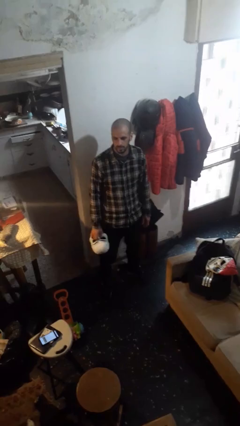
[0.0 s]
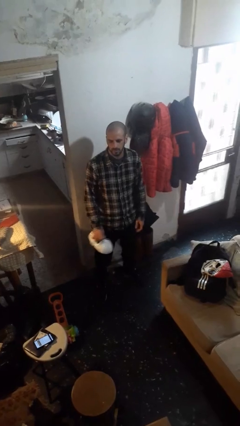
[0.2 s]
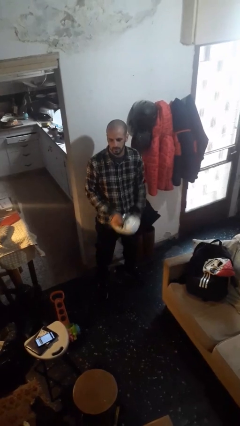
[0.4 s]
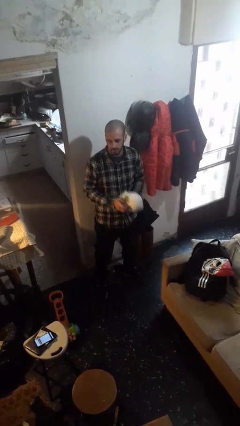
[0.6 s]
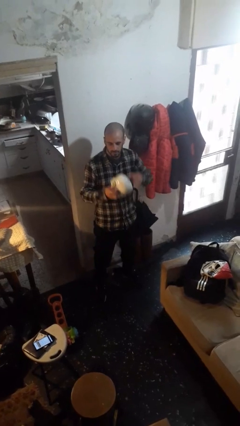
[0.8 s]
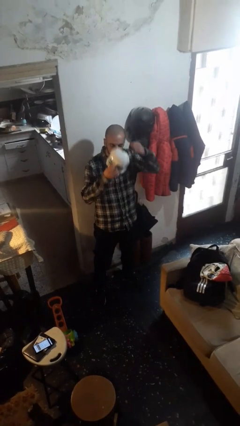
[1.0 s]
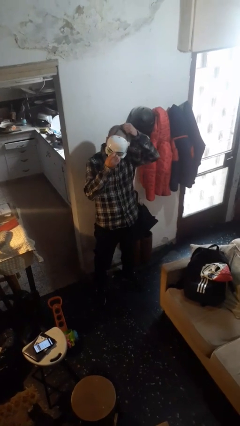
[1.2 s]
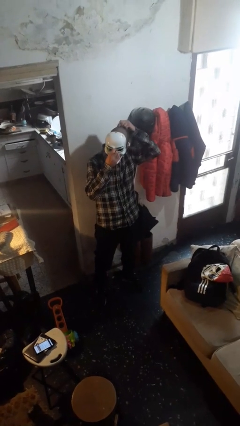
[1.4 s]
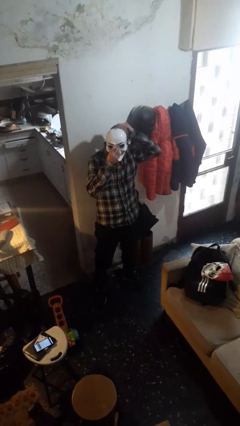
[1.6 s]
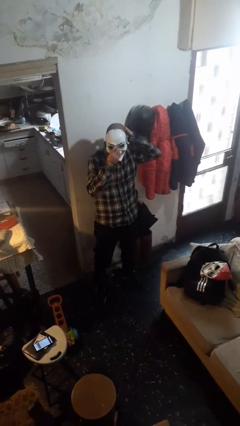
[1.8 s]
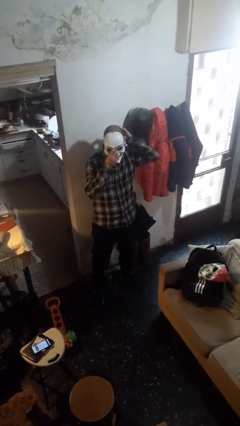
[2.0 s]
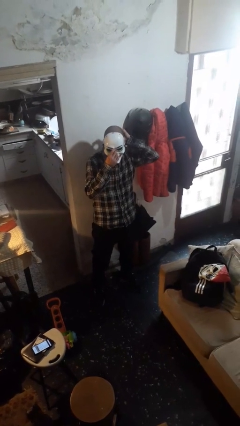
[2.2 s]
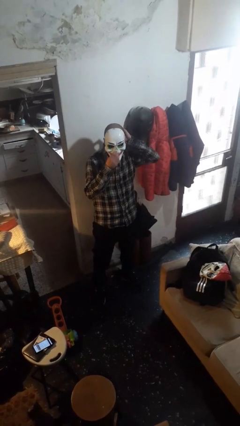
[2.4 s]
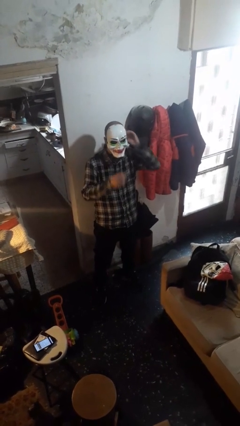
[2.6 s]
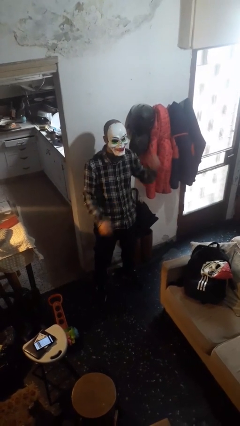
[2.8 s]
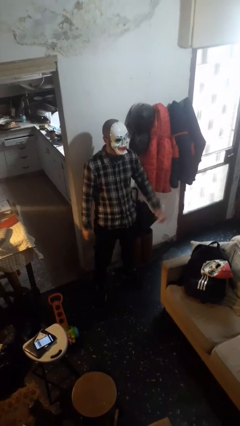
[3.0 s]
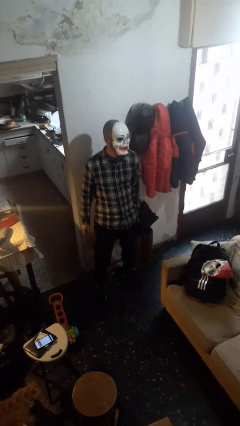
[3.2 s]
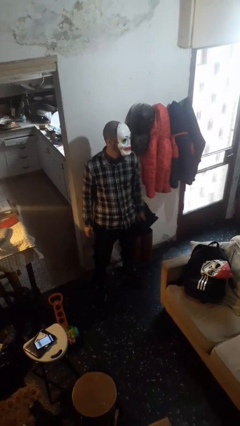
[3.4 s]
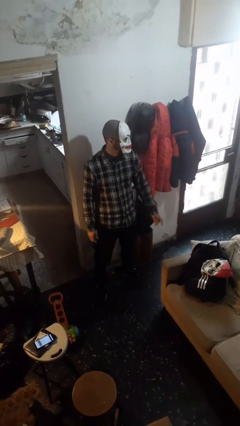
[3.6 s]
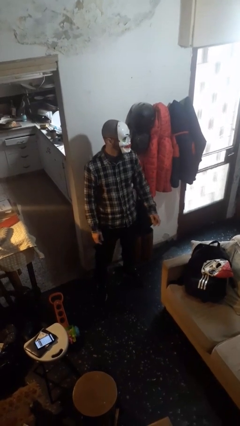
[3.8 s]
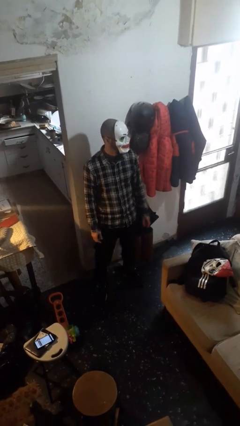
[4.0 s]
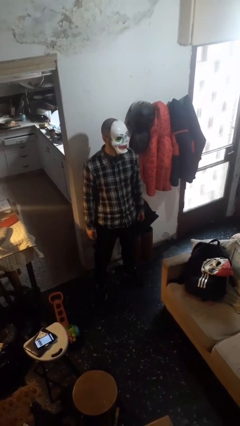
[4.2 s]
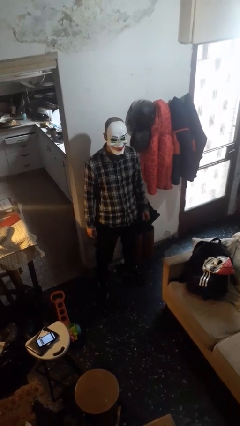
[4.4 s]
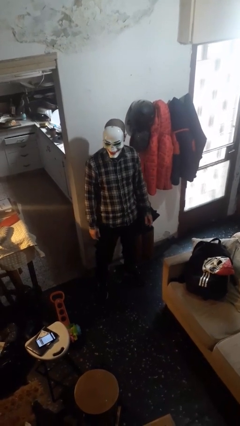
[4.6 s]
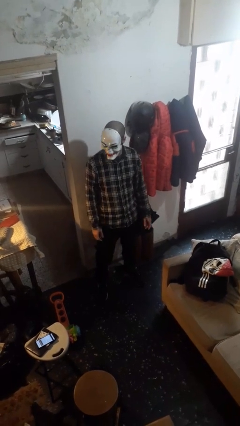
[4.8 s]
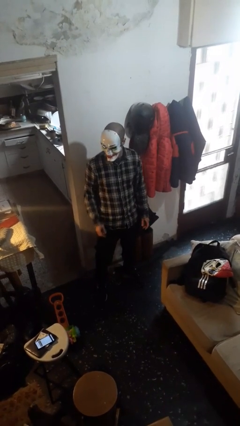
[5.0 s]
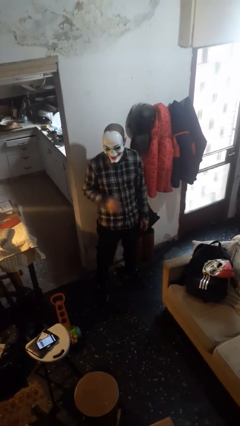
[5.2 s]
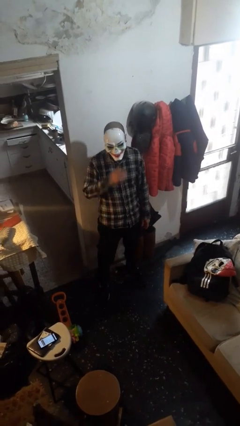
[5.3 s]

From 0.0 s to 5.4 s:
person puts on facemask

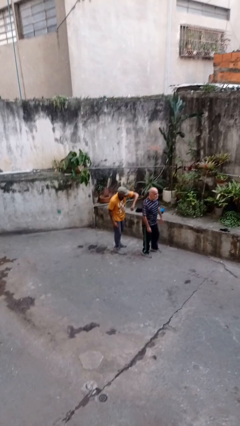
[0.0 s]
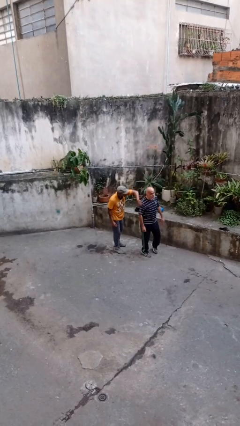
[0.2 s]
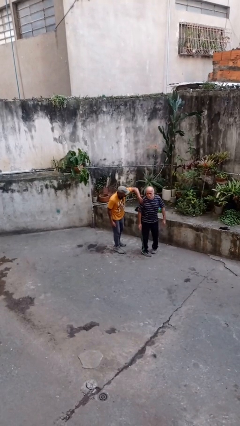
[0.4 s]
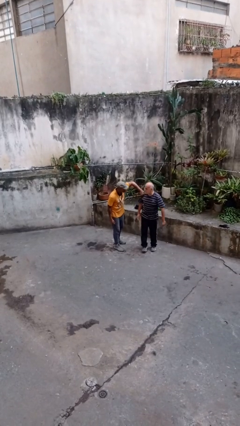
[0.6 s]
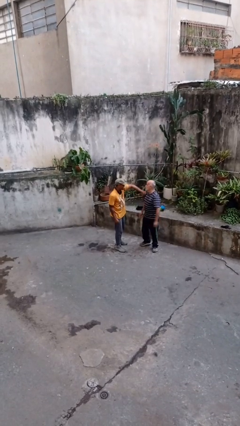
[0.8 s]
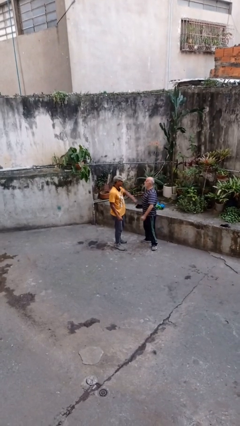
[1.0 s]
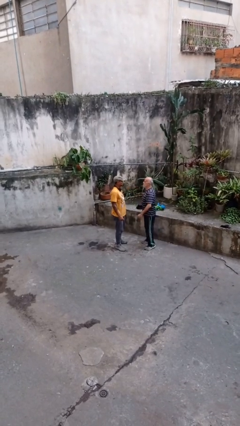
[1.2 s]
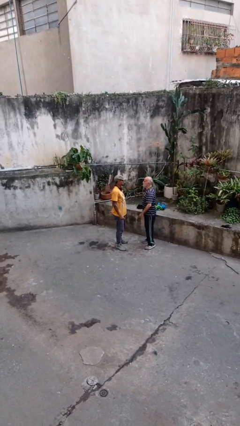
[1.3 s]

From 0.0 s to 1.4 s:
person spins person around

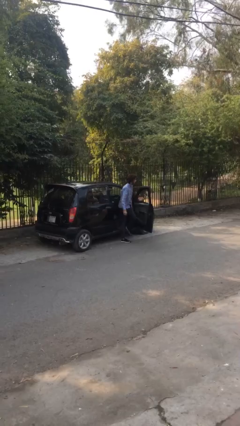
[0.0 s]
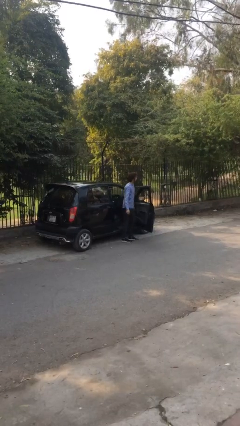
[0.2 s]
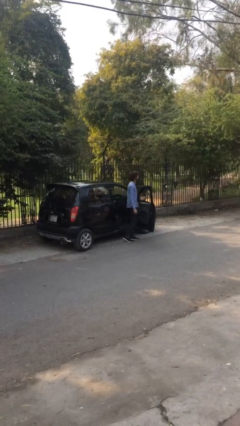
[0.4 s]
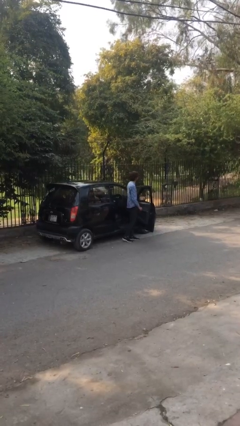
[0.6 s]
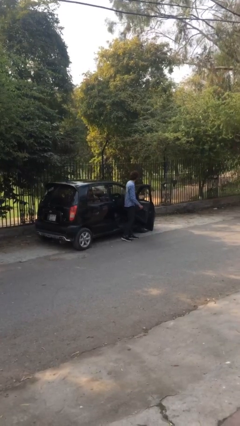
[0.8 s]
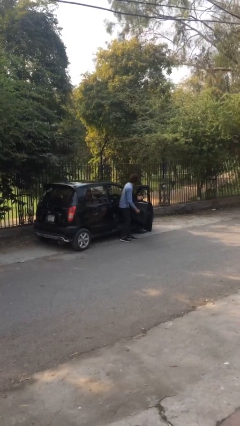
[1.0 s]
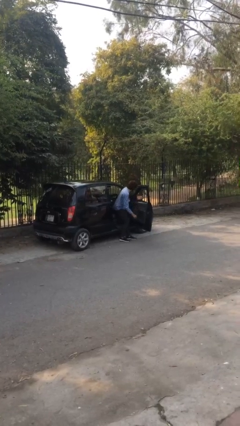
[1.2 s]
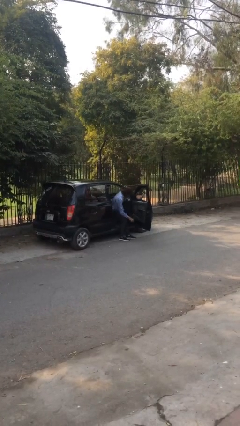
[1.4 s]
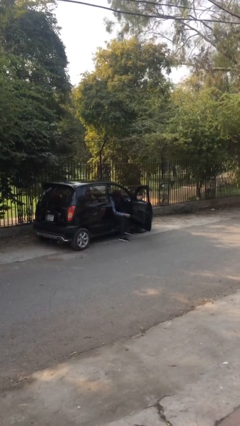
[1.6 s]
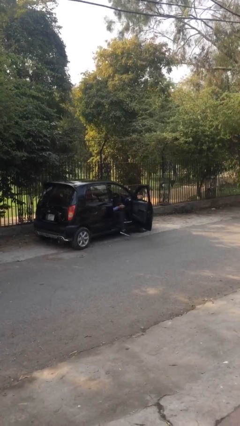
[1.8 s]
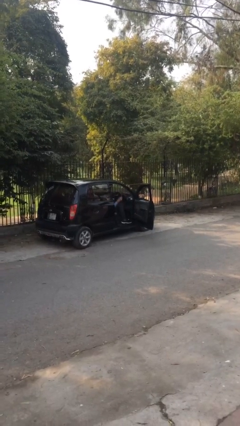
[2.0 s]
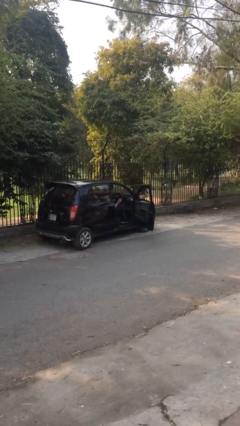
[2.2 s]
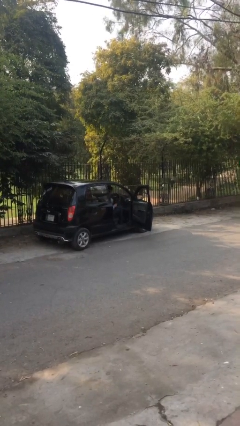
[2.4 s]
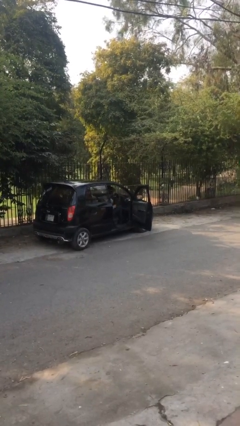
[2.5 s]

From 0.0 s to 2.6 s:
person enters car

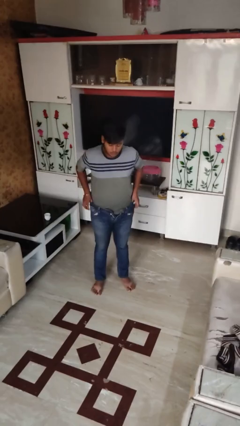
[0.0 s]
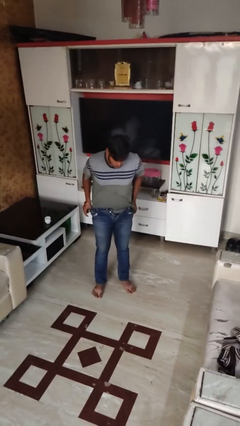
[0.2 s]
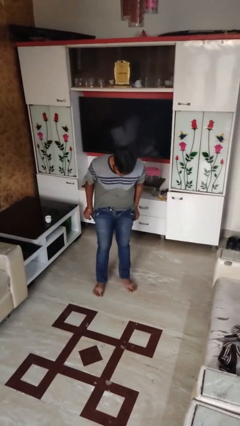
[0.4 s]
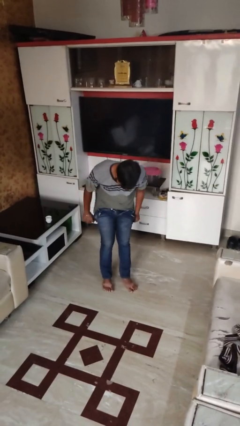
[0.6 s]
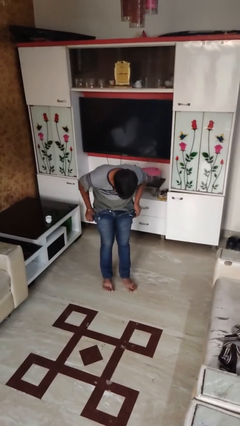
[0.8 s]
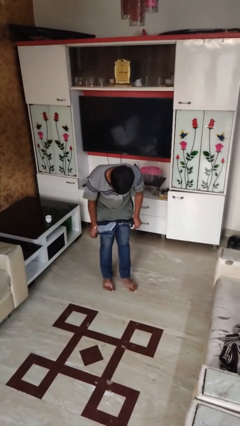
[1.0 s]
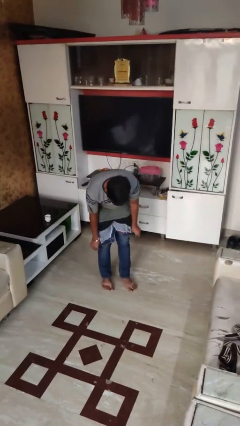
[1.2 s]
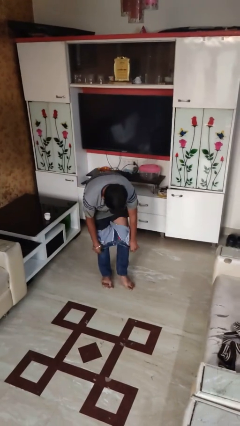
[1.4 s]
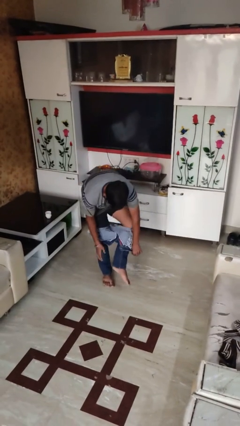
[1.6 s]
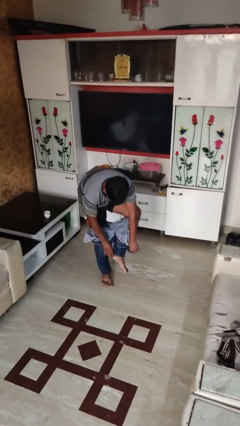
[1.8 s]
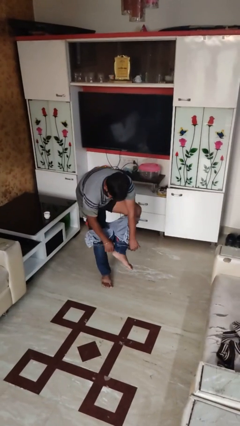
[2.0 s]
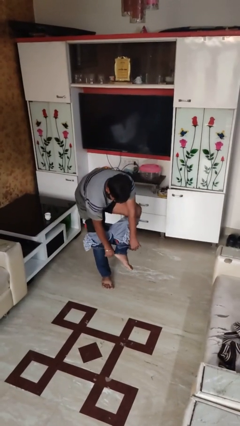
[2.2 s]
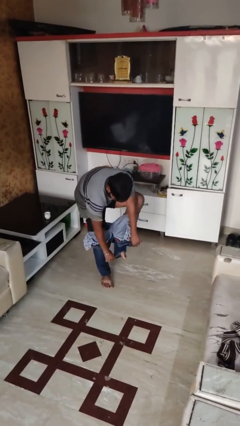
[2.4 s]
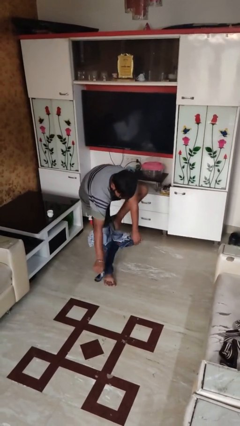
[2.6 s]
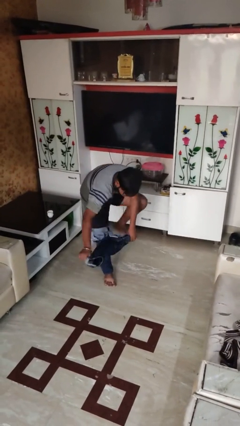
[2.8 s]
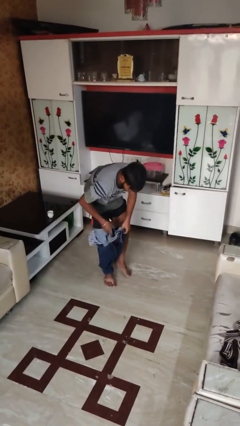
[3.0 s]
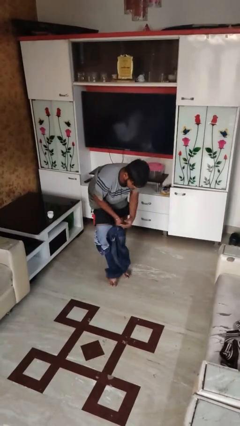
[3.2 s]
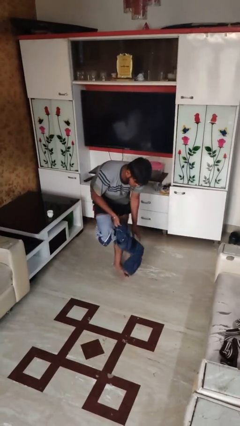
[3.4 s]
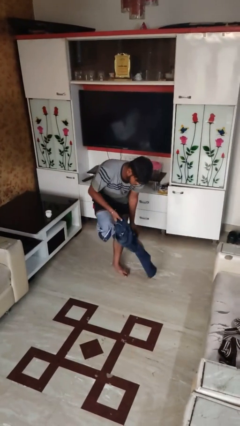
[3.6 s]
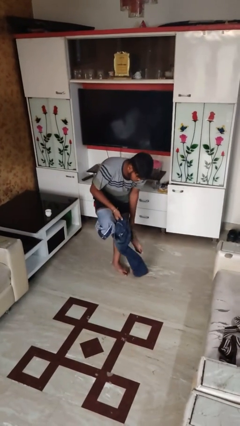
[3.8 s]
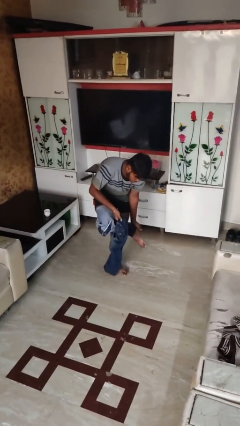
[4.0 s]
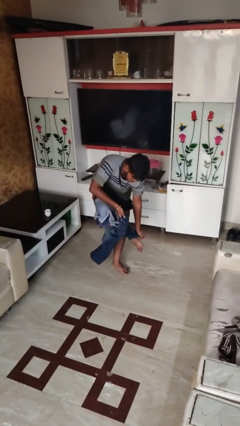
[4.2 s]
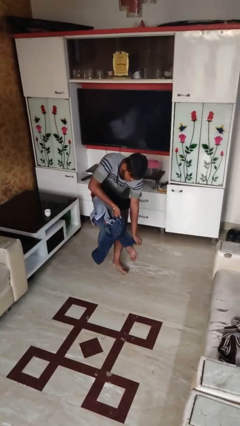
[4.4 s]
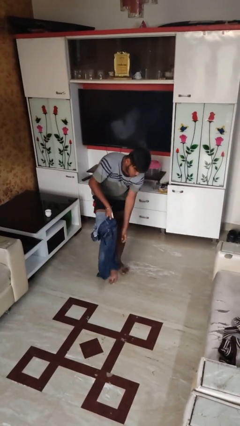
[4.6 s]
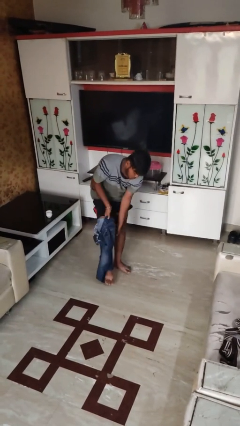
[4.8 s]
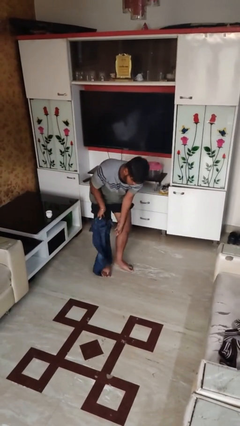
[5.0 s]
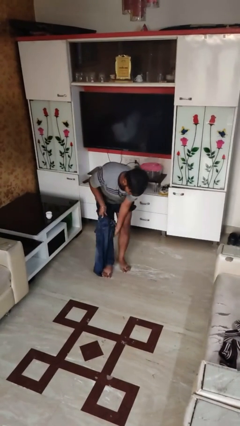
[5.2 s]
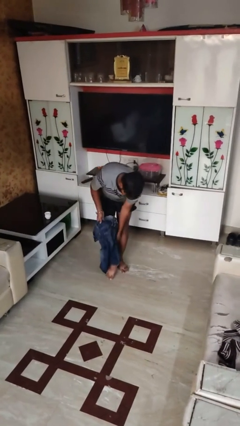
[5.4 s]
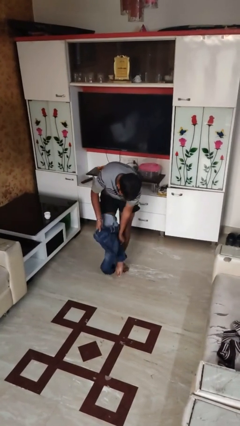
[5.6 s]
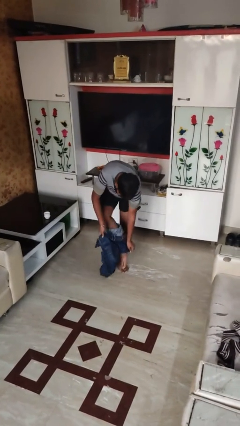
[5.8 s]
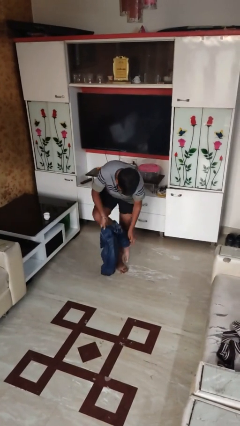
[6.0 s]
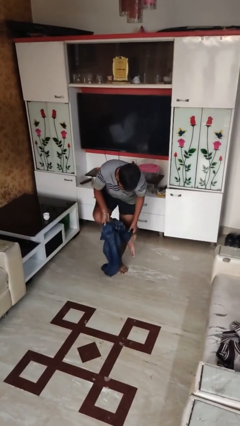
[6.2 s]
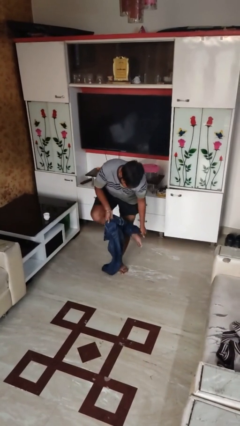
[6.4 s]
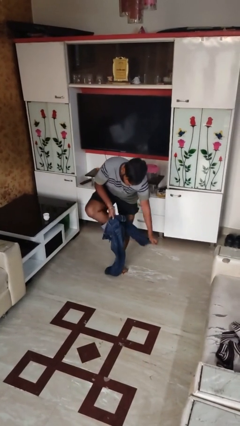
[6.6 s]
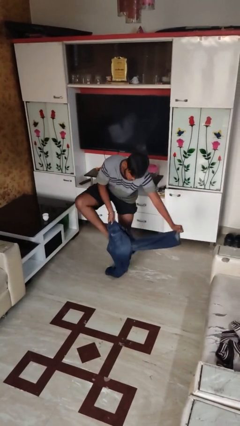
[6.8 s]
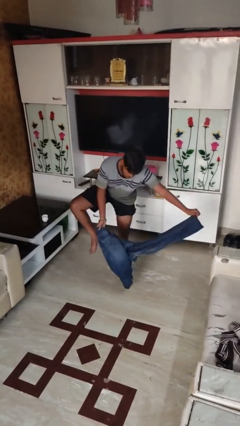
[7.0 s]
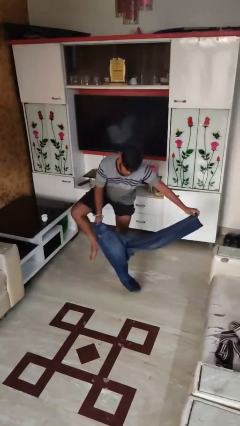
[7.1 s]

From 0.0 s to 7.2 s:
person takes off pants

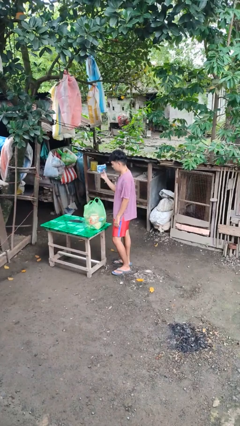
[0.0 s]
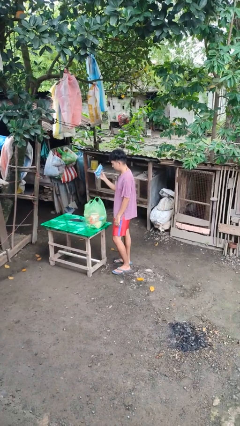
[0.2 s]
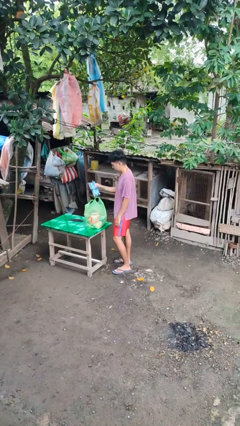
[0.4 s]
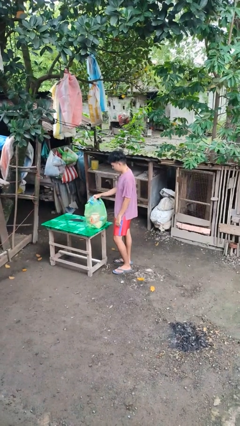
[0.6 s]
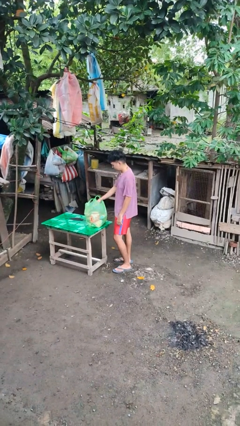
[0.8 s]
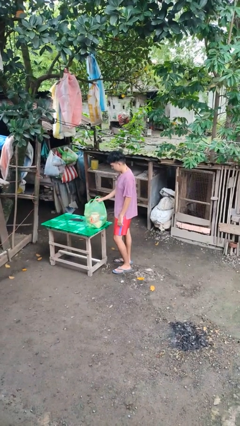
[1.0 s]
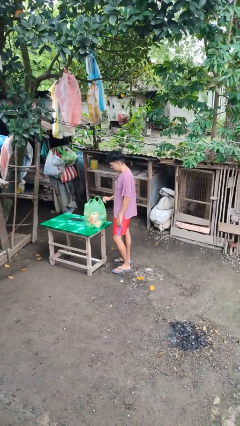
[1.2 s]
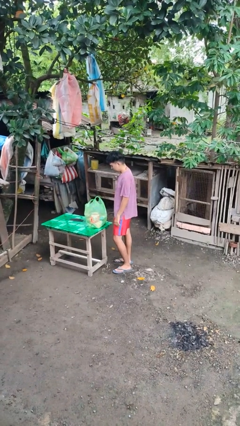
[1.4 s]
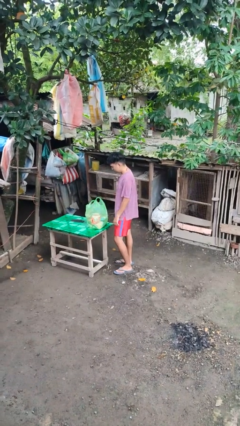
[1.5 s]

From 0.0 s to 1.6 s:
person puts object into bag
